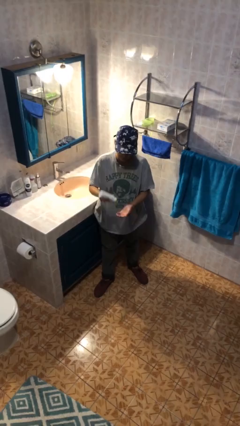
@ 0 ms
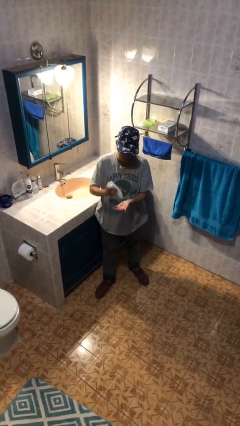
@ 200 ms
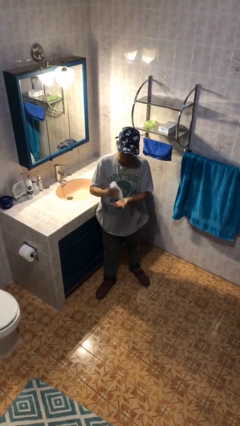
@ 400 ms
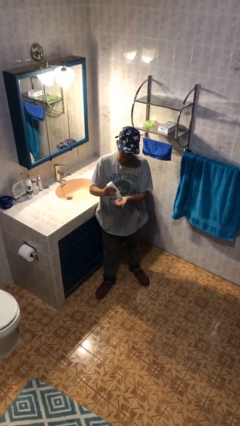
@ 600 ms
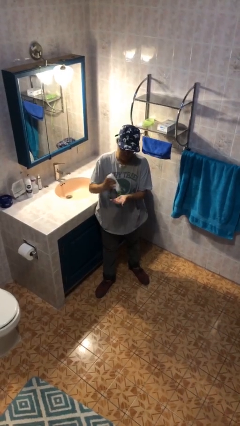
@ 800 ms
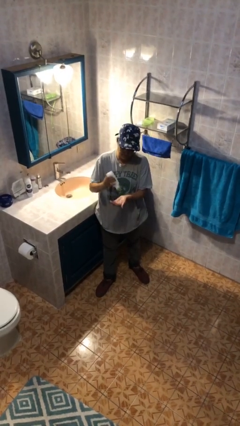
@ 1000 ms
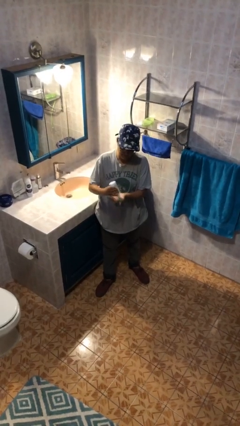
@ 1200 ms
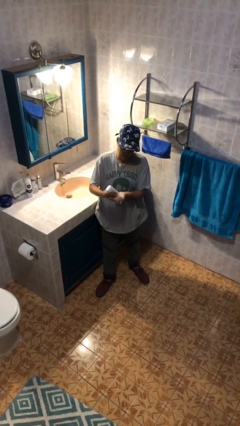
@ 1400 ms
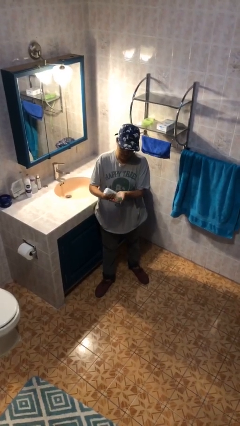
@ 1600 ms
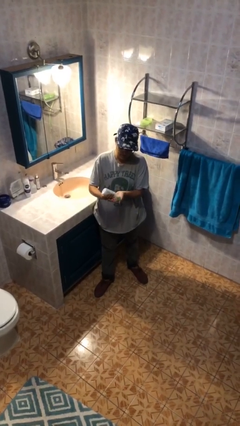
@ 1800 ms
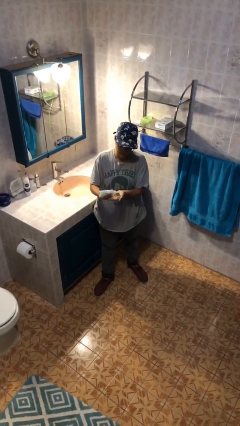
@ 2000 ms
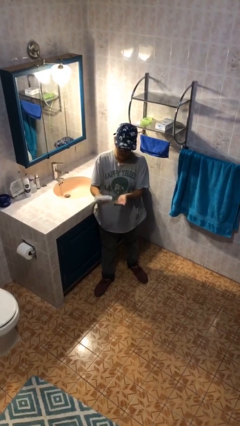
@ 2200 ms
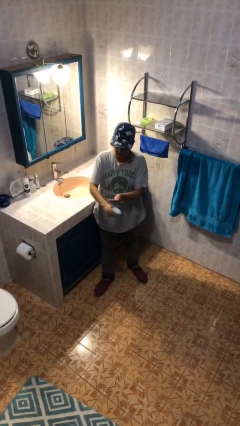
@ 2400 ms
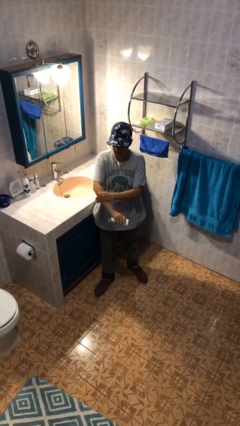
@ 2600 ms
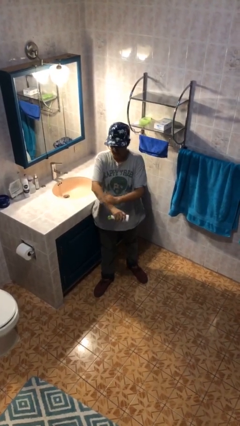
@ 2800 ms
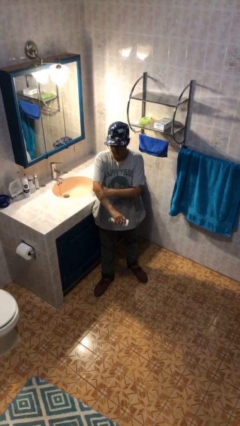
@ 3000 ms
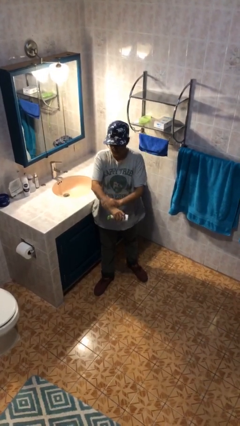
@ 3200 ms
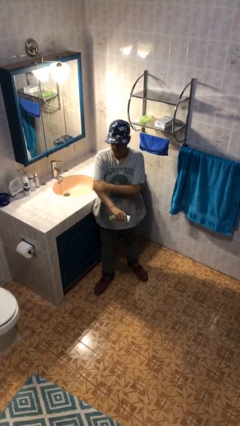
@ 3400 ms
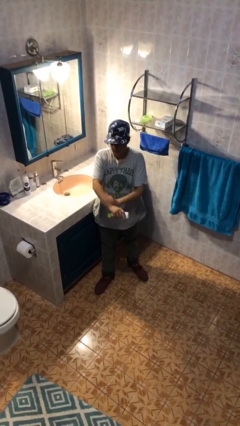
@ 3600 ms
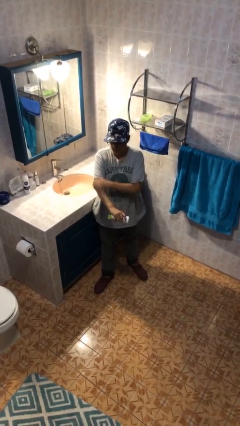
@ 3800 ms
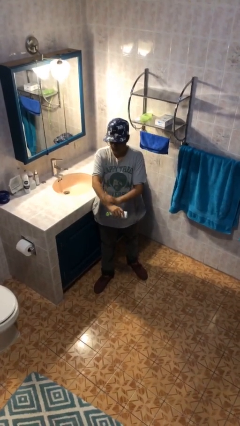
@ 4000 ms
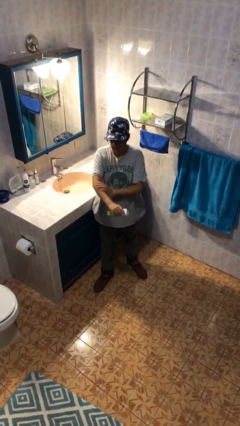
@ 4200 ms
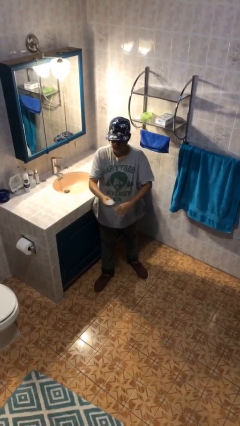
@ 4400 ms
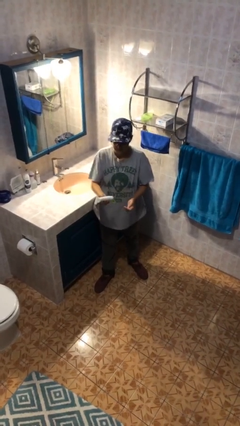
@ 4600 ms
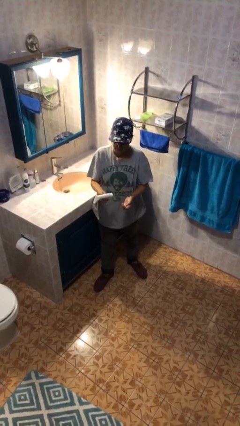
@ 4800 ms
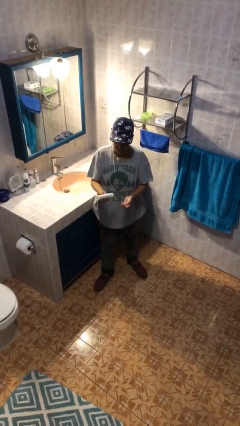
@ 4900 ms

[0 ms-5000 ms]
person applies sunscreen

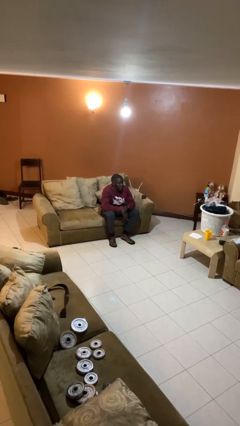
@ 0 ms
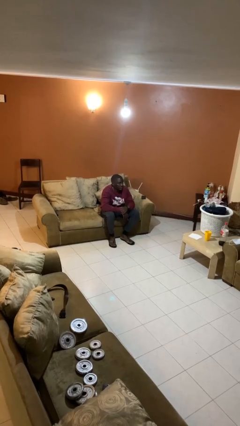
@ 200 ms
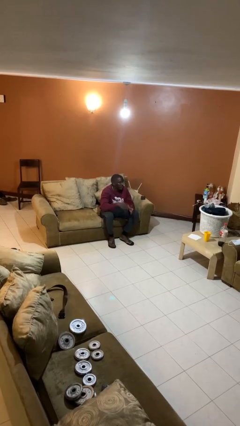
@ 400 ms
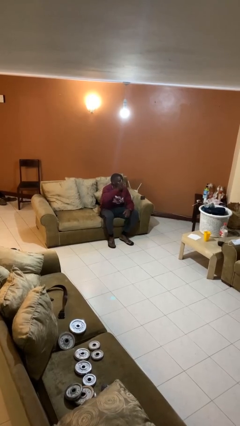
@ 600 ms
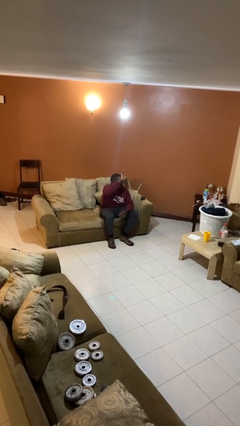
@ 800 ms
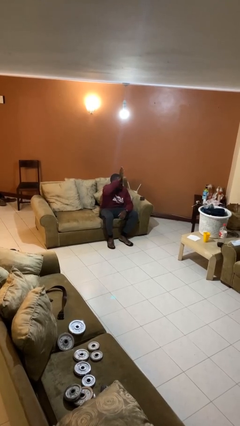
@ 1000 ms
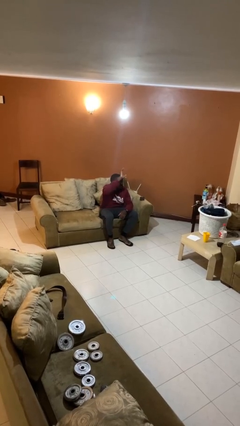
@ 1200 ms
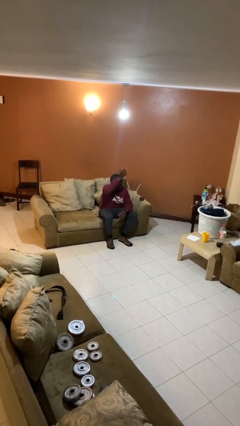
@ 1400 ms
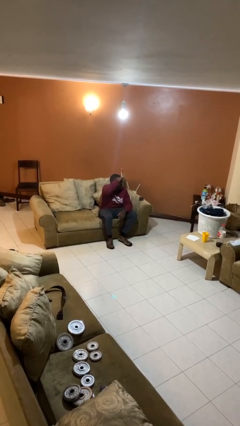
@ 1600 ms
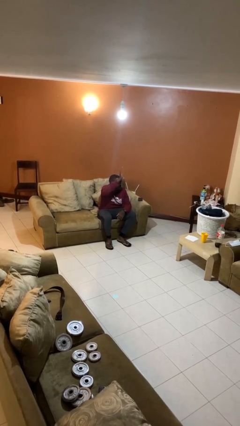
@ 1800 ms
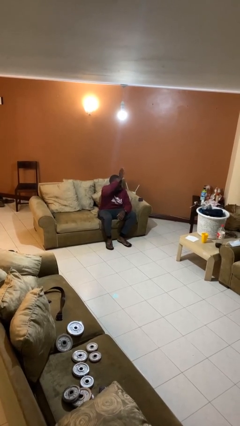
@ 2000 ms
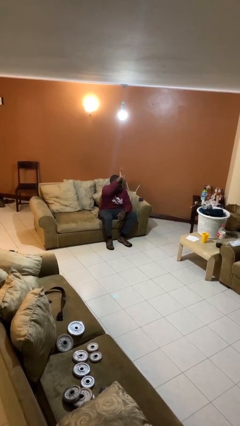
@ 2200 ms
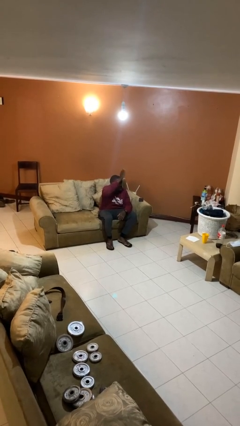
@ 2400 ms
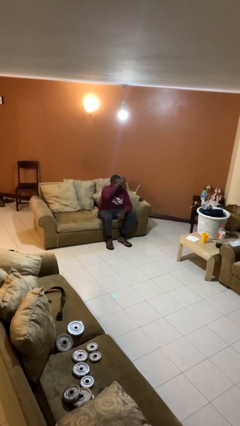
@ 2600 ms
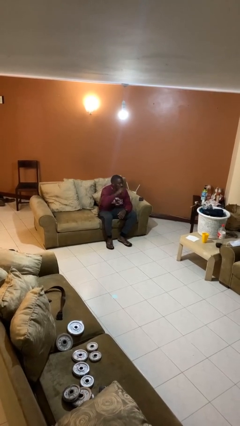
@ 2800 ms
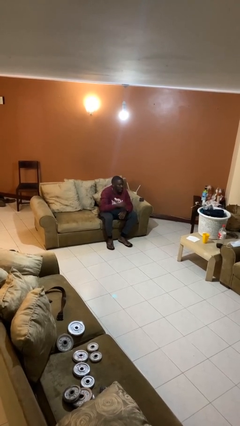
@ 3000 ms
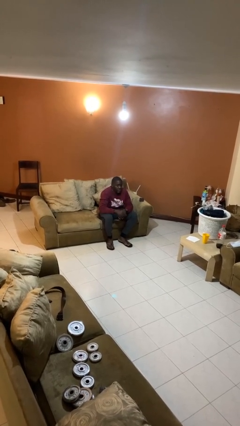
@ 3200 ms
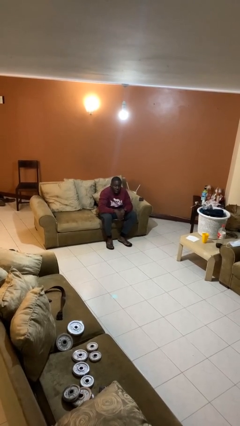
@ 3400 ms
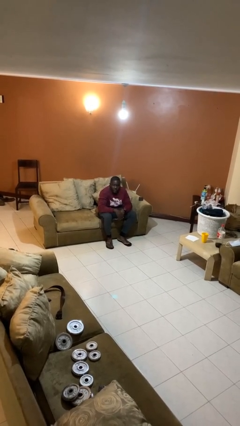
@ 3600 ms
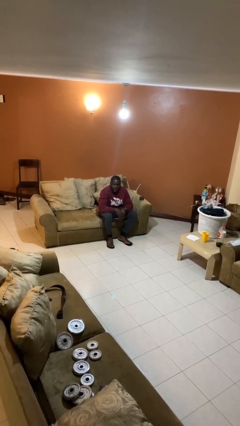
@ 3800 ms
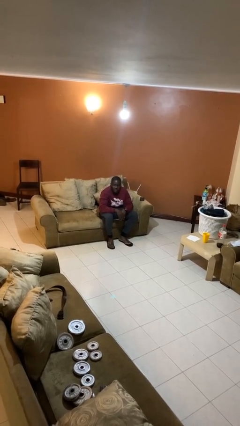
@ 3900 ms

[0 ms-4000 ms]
person waves at person

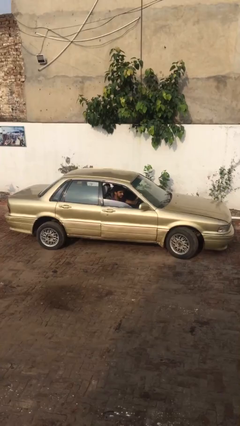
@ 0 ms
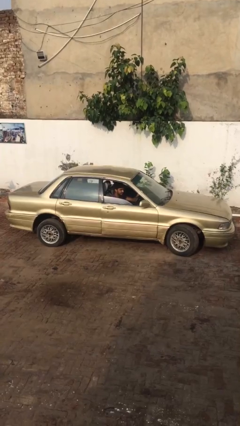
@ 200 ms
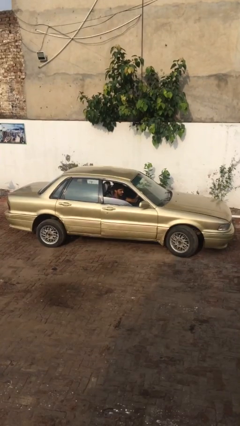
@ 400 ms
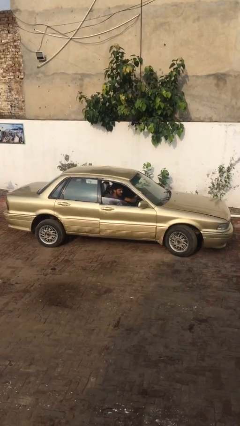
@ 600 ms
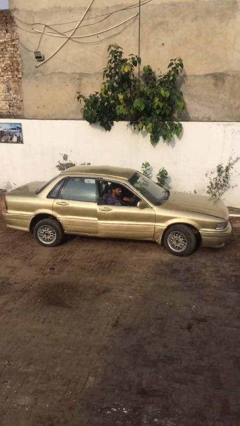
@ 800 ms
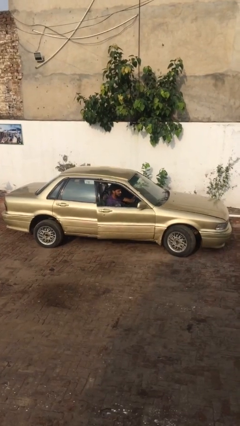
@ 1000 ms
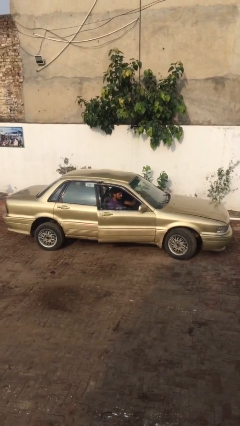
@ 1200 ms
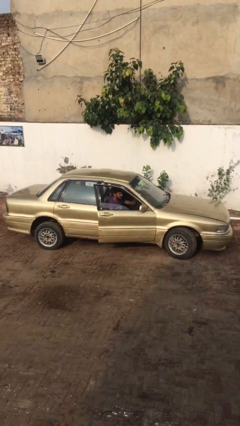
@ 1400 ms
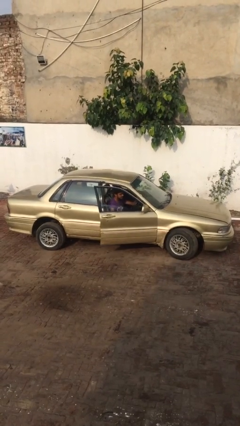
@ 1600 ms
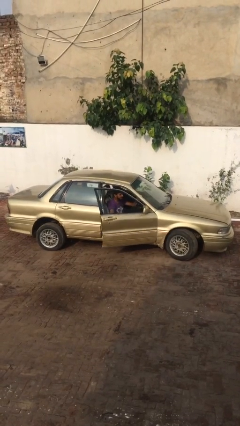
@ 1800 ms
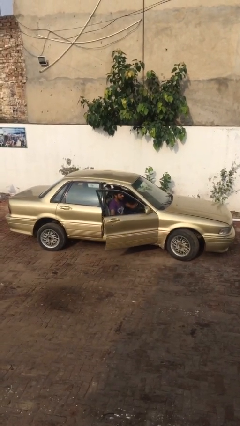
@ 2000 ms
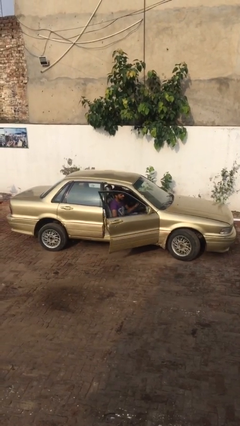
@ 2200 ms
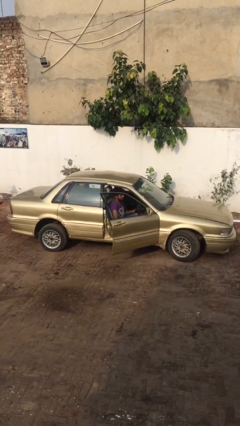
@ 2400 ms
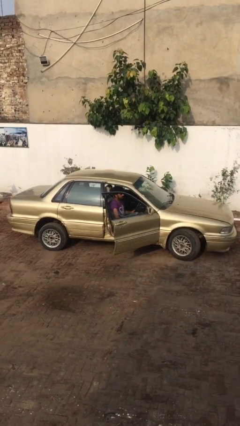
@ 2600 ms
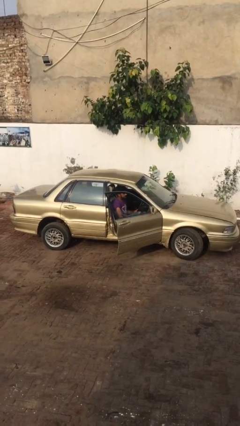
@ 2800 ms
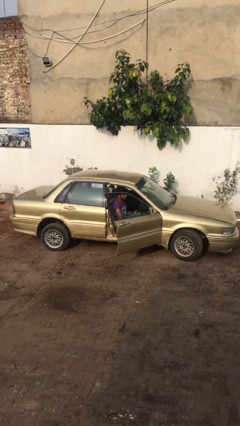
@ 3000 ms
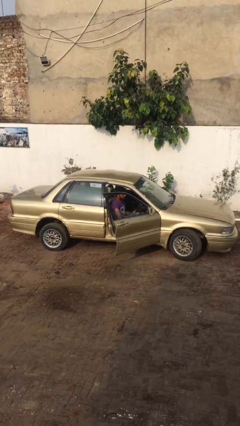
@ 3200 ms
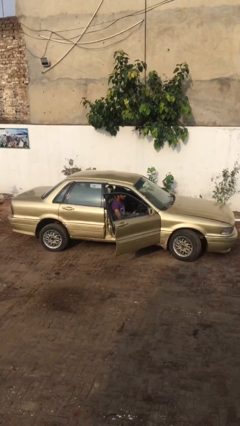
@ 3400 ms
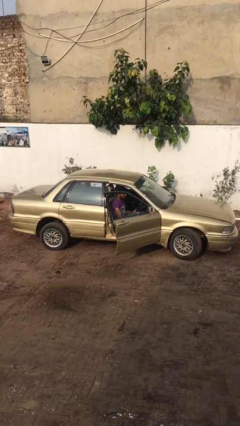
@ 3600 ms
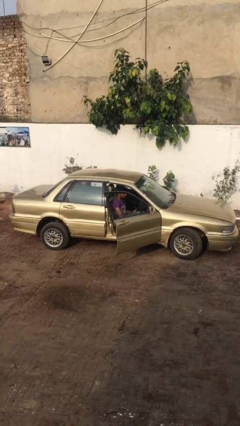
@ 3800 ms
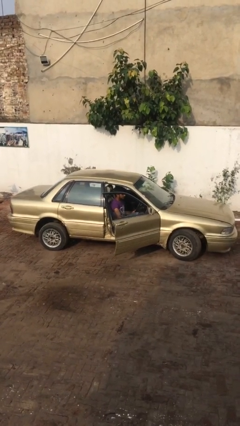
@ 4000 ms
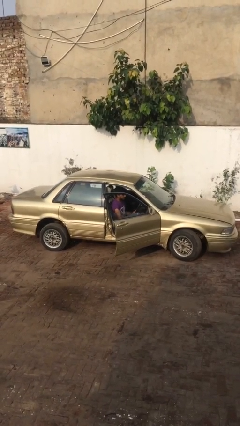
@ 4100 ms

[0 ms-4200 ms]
person opens car door

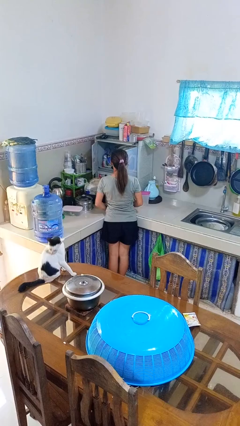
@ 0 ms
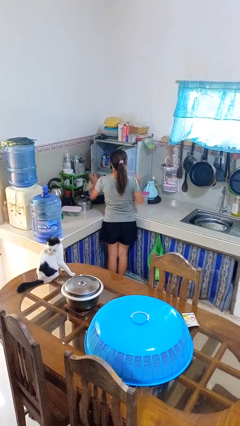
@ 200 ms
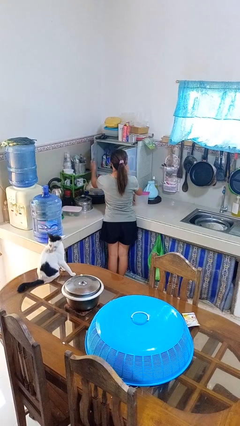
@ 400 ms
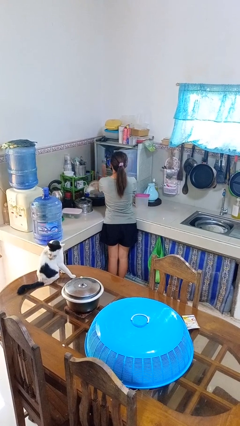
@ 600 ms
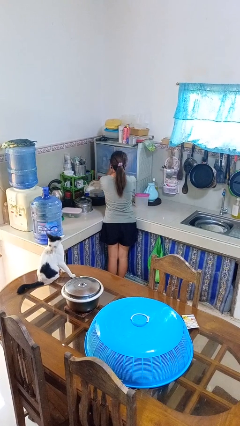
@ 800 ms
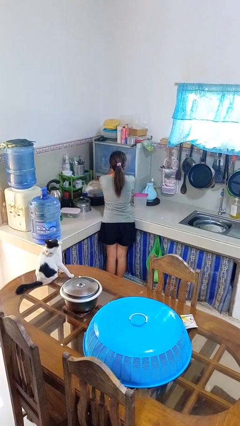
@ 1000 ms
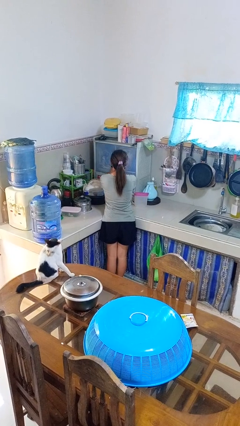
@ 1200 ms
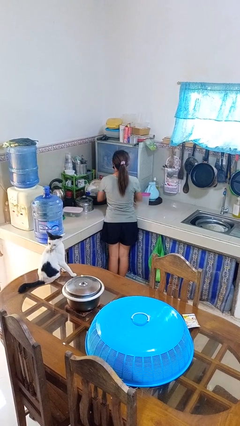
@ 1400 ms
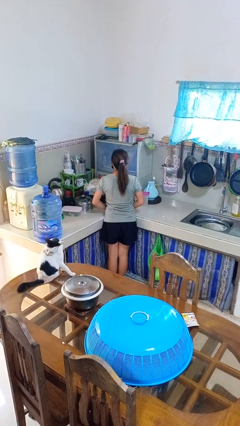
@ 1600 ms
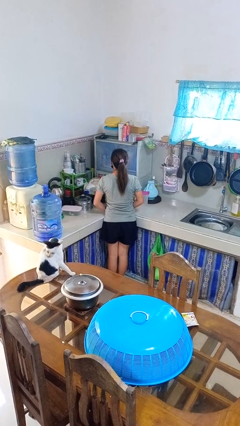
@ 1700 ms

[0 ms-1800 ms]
person closes kitchen drawer

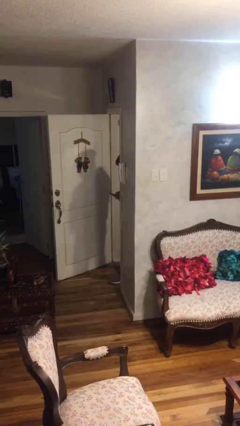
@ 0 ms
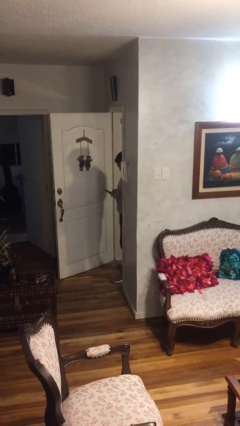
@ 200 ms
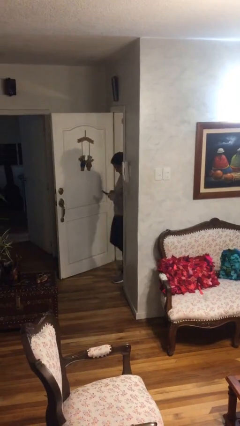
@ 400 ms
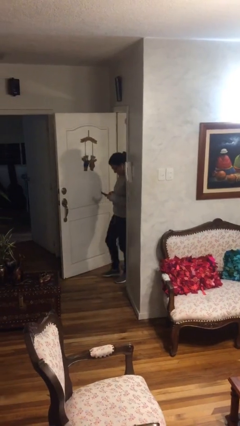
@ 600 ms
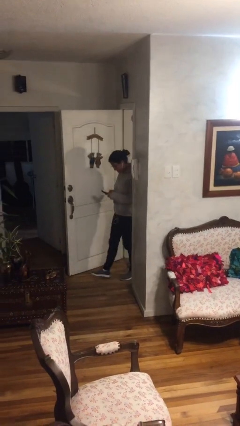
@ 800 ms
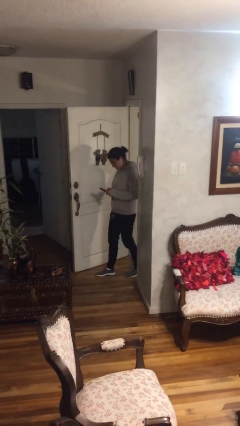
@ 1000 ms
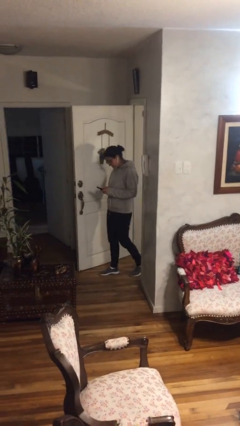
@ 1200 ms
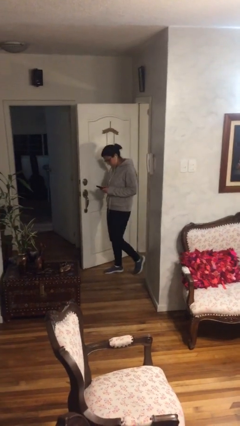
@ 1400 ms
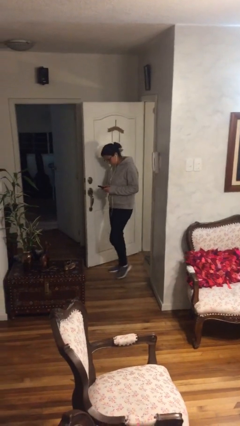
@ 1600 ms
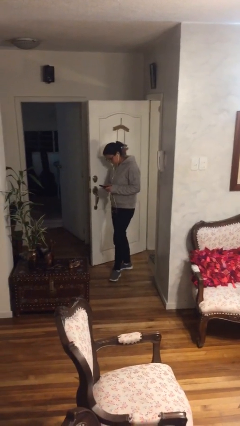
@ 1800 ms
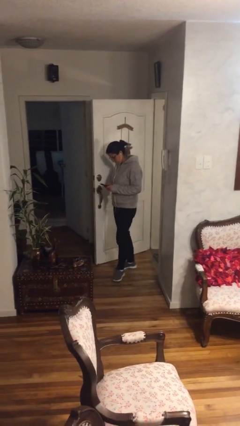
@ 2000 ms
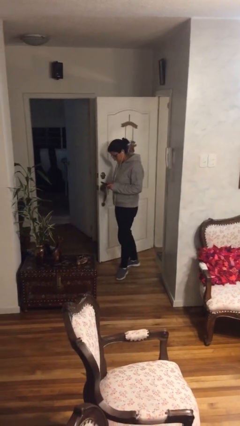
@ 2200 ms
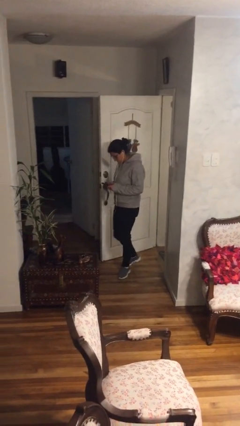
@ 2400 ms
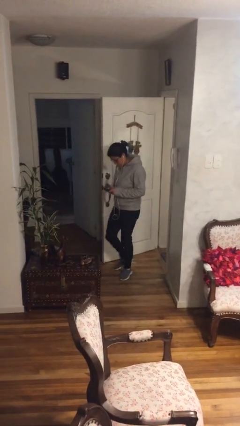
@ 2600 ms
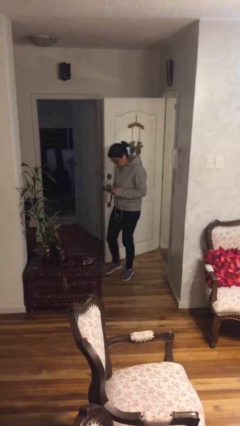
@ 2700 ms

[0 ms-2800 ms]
person enters scene through structure
